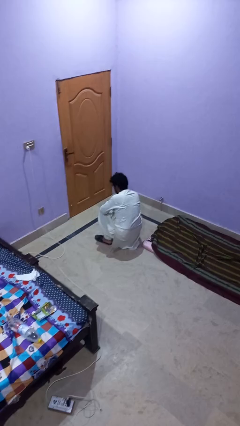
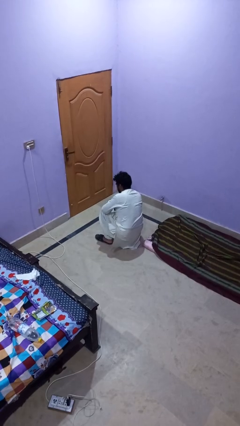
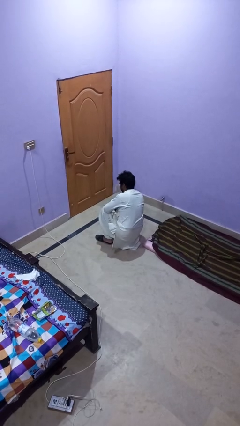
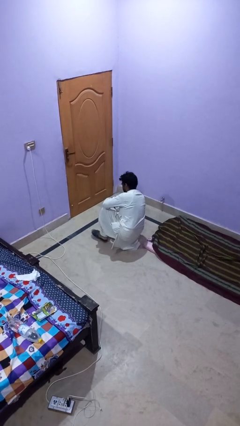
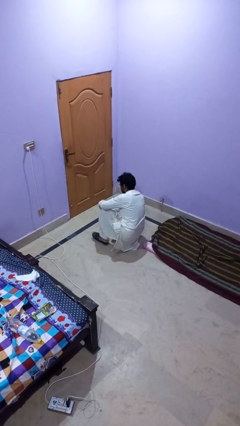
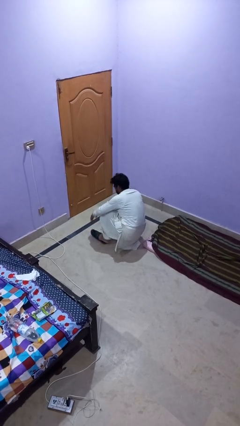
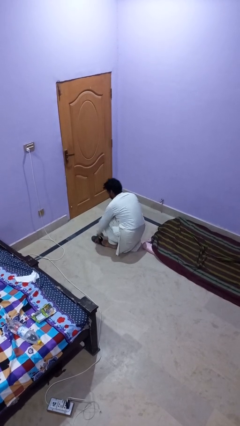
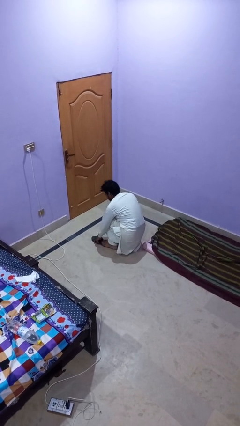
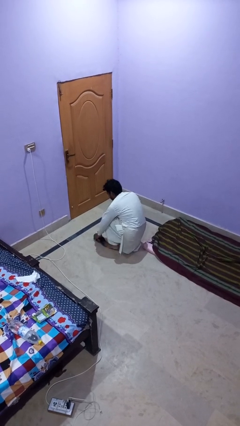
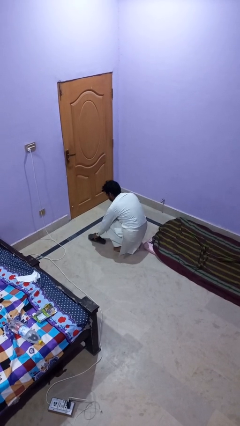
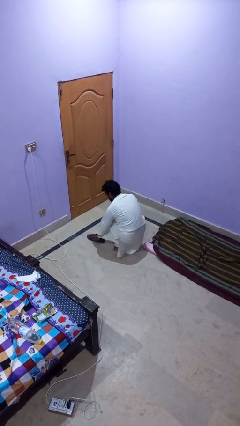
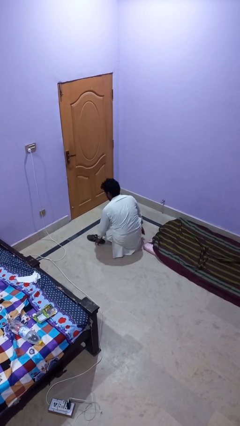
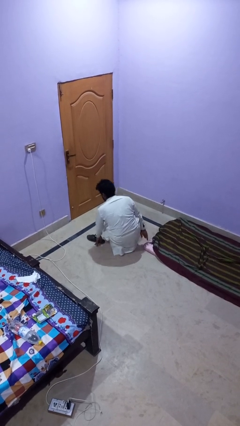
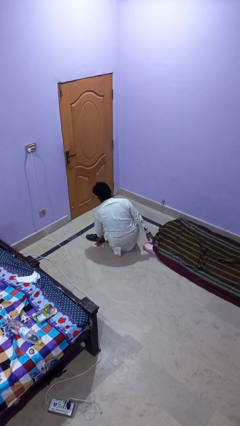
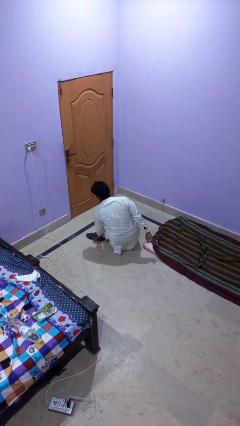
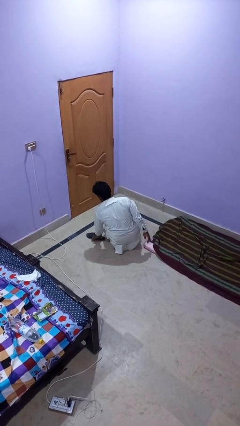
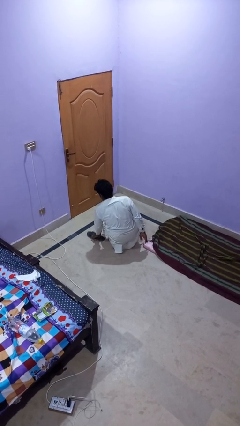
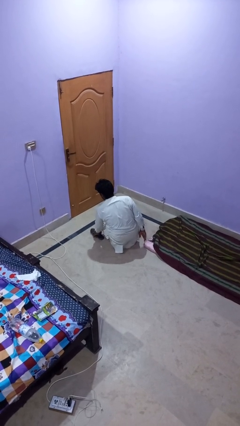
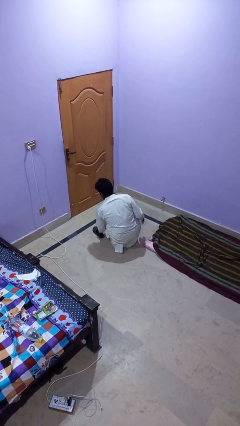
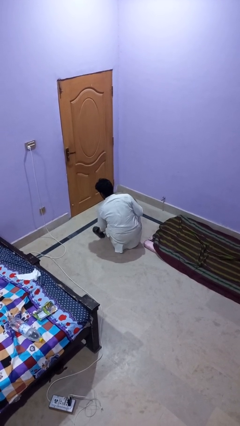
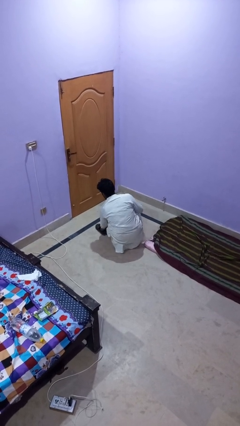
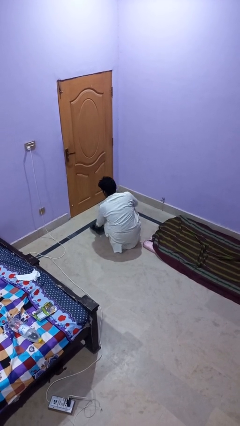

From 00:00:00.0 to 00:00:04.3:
person takes off shoes

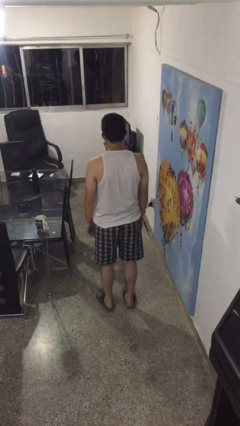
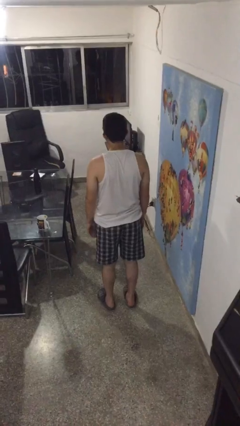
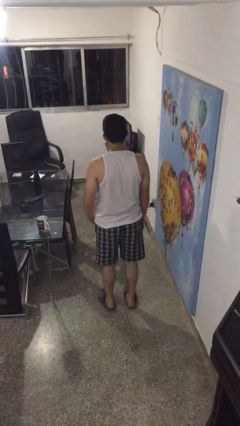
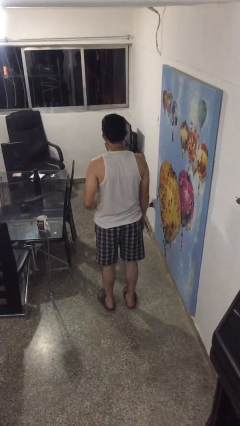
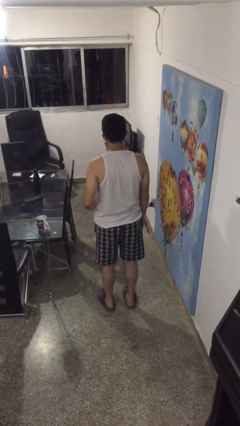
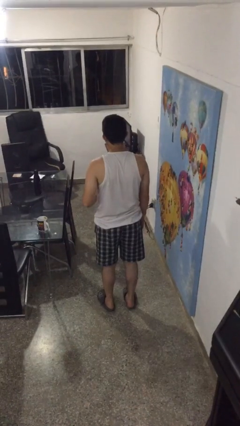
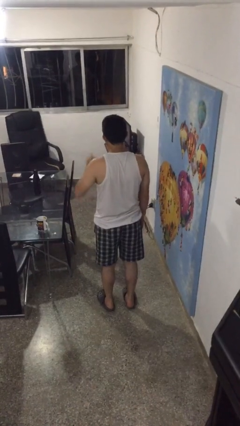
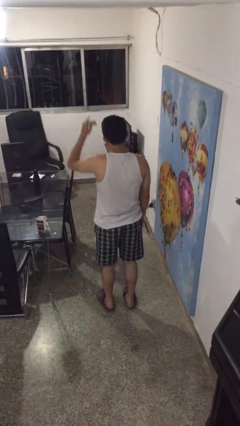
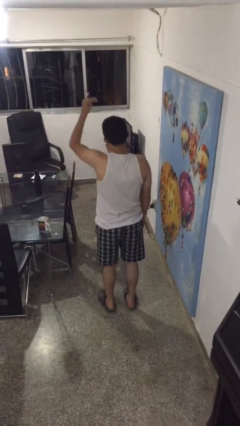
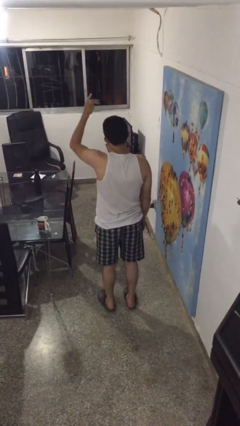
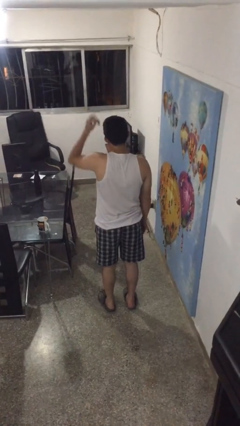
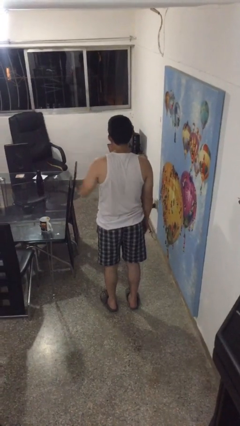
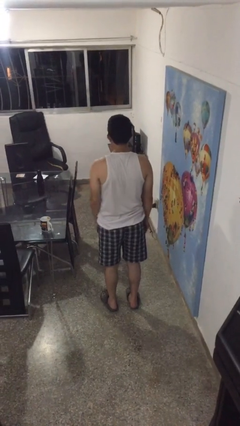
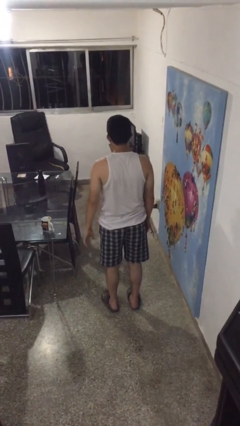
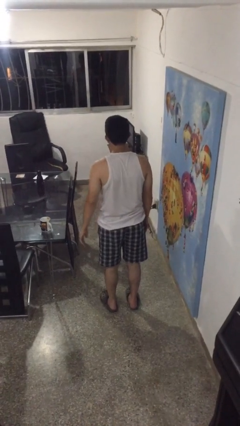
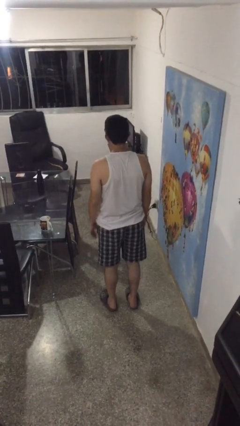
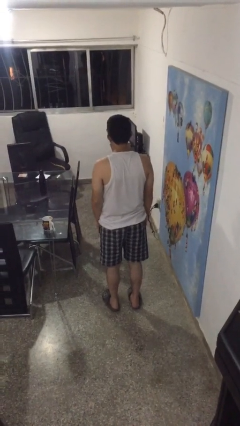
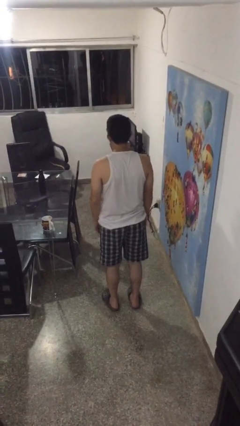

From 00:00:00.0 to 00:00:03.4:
person gestures swipe up

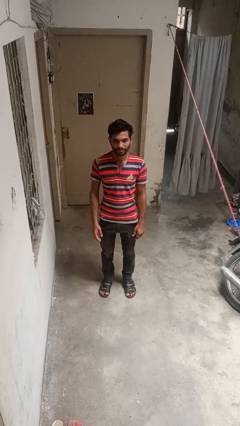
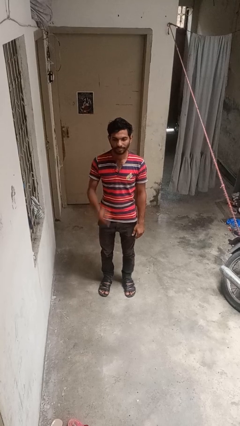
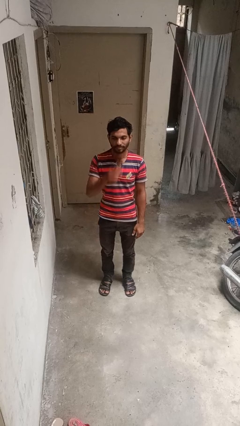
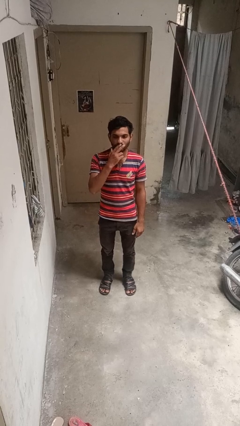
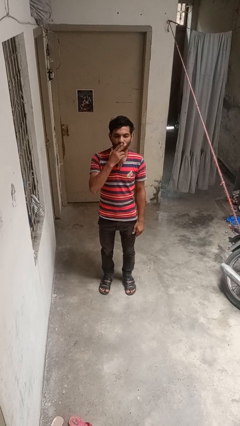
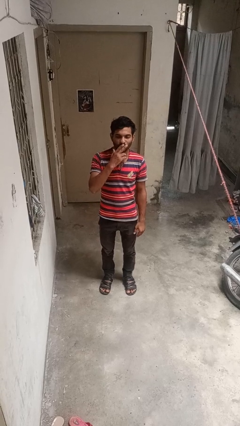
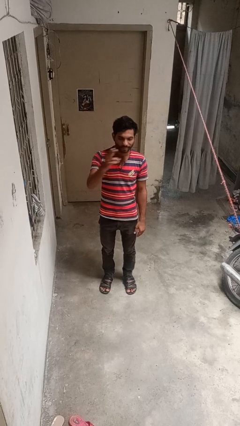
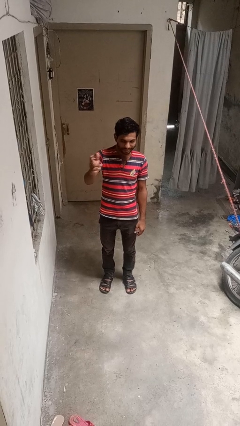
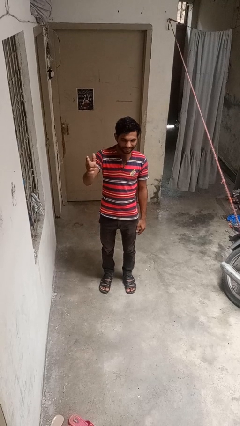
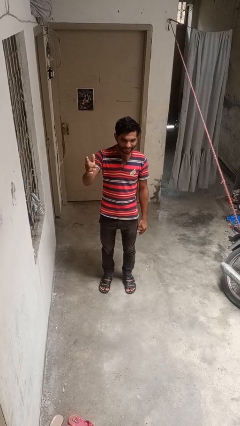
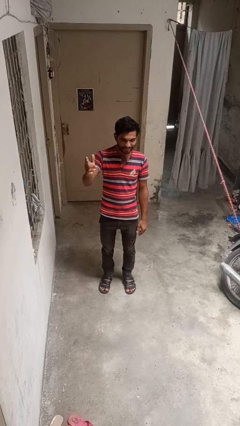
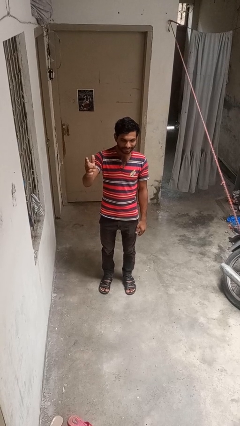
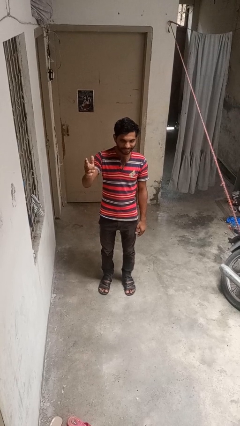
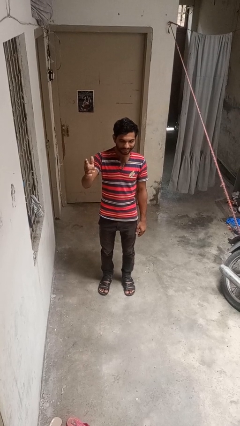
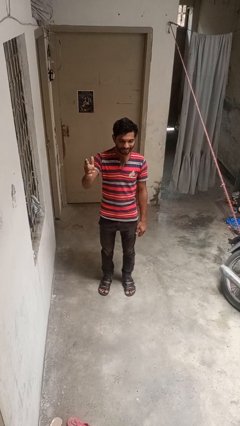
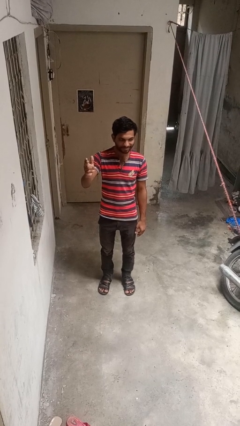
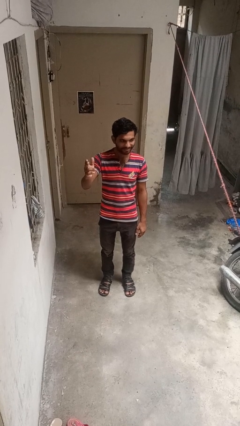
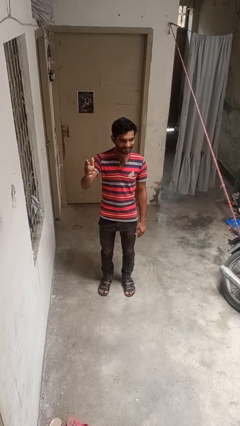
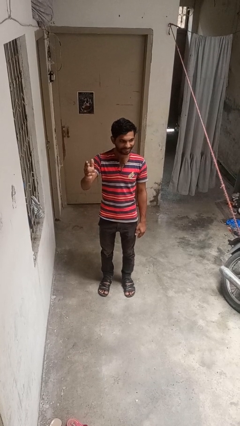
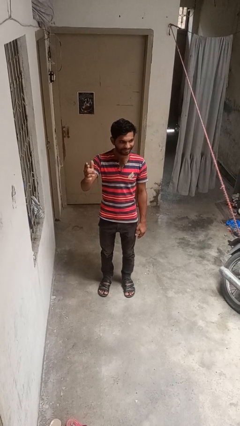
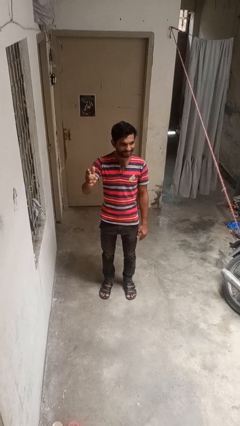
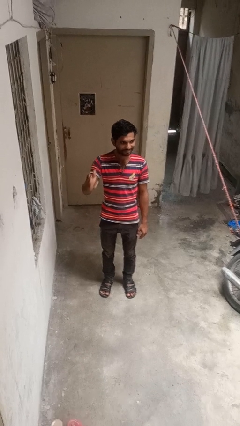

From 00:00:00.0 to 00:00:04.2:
person gestures blow kiss

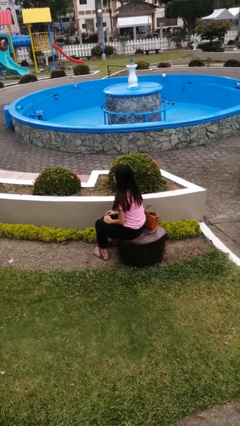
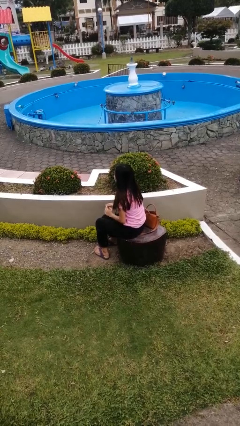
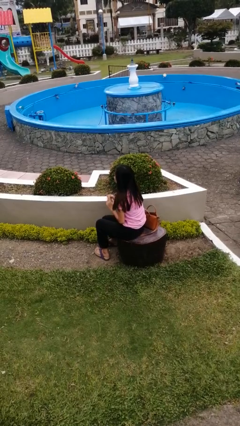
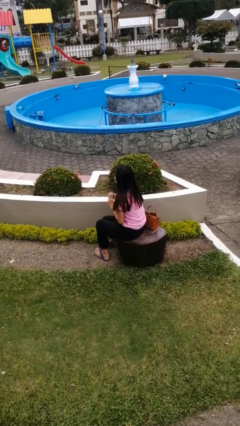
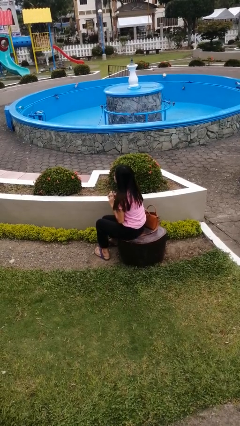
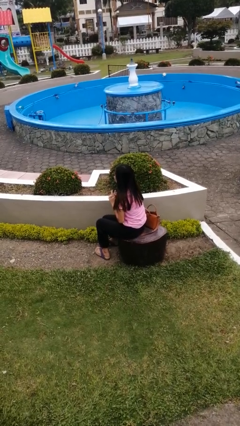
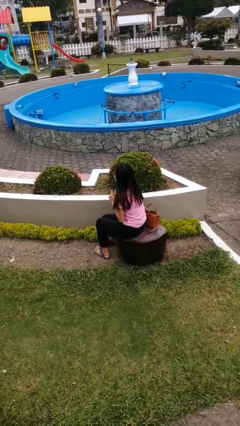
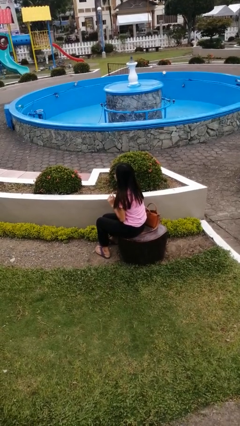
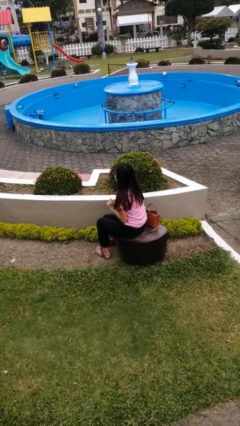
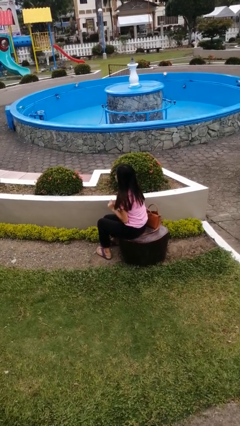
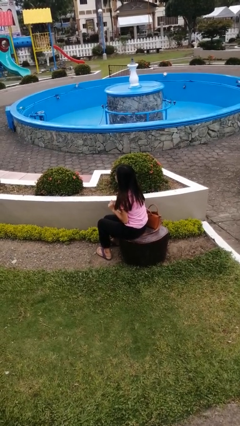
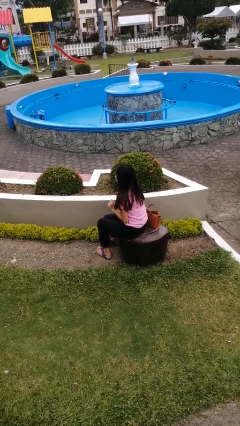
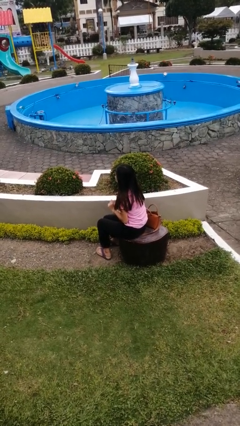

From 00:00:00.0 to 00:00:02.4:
person puts on ring

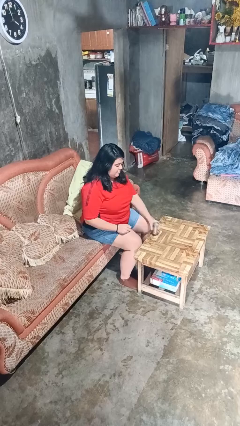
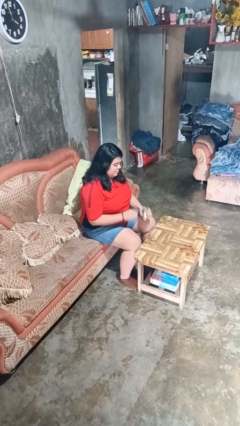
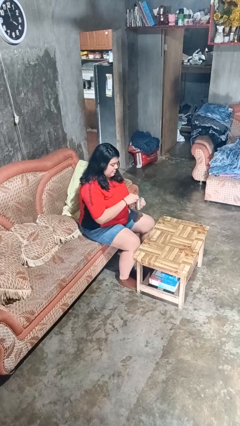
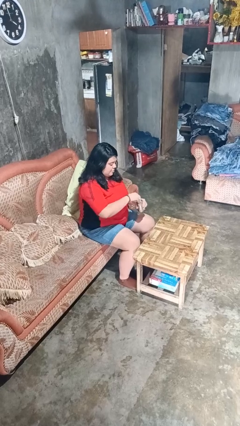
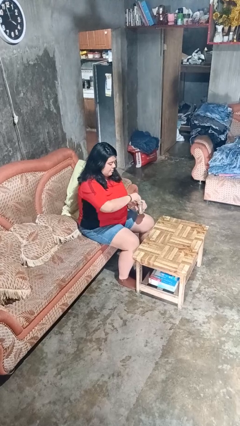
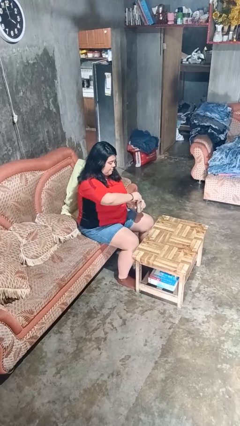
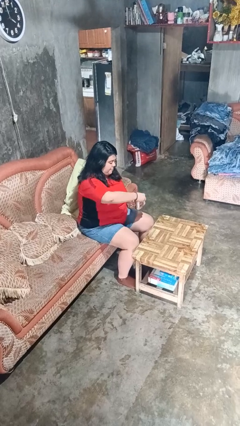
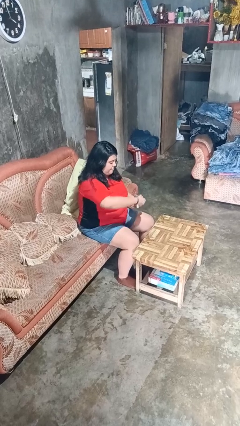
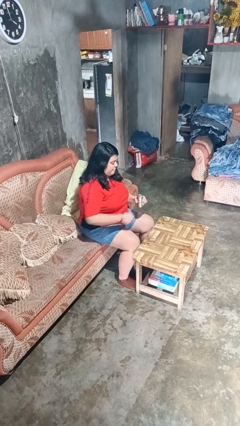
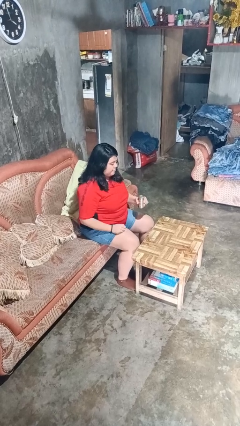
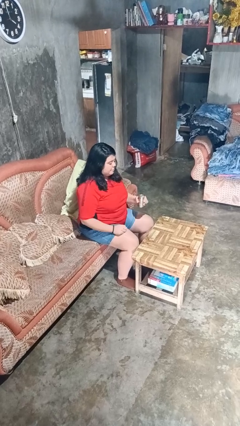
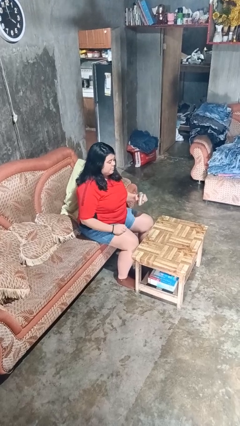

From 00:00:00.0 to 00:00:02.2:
person opens beverage can

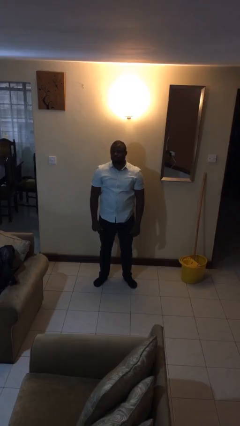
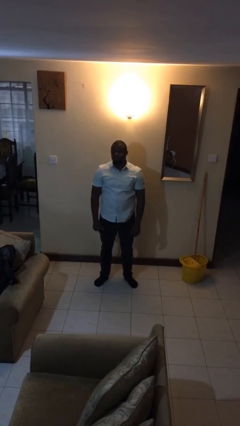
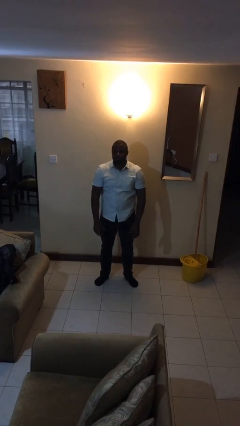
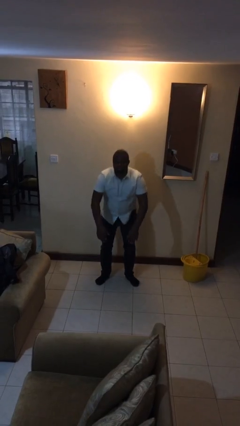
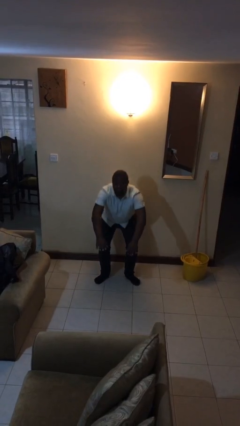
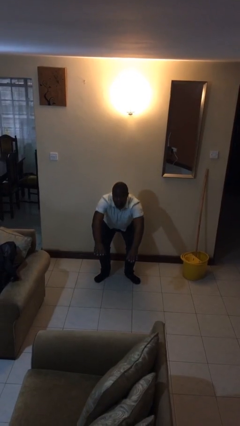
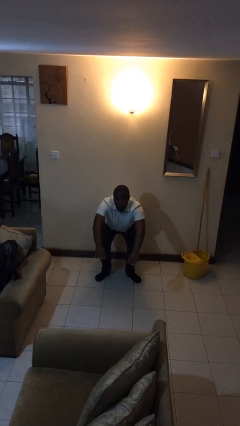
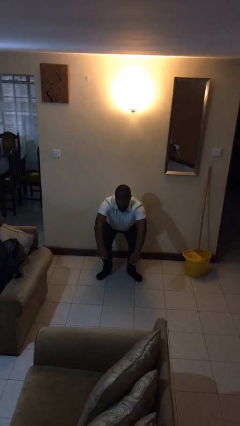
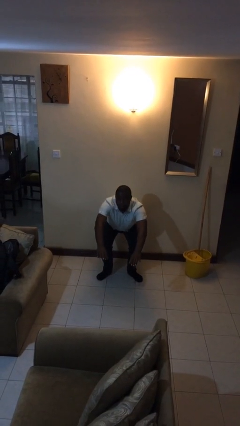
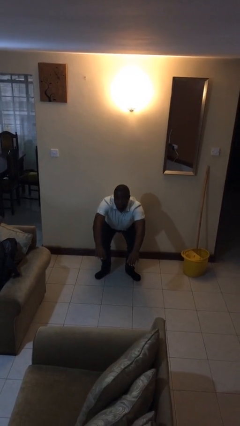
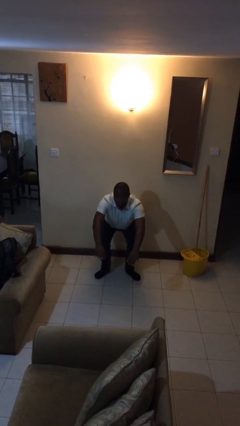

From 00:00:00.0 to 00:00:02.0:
person squats
